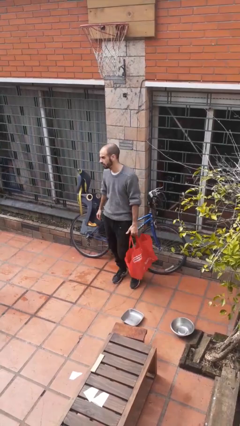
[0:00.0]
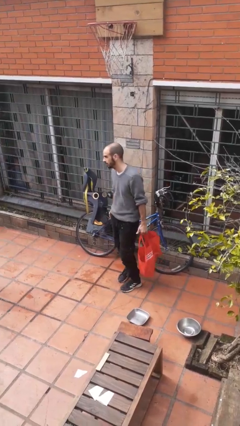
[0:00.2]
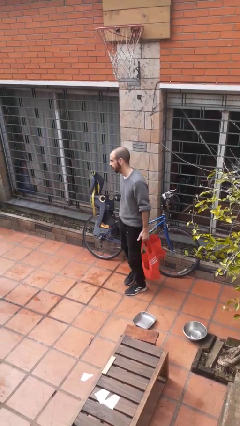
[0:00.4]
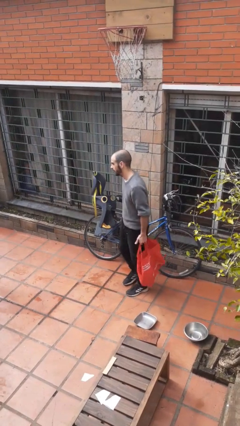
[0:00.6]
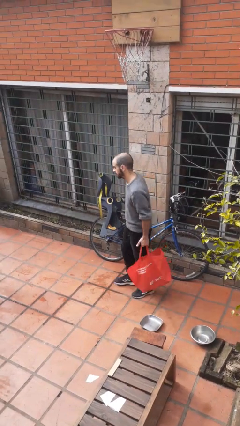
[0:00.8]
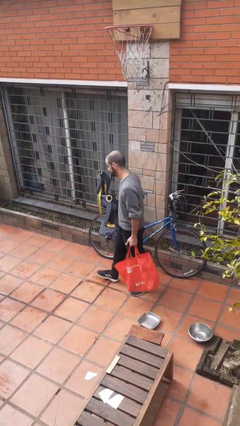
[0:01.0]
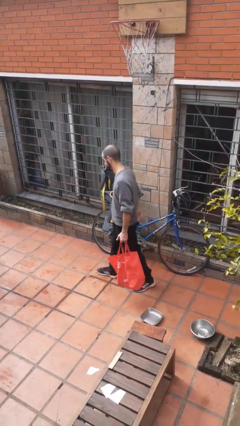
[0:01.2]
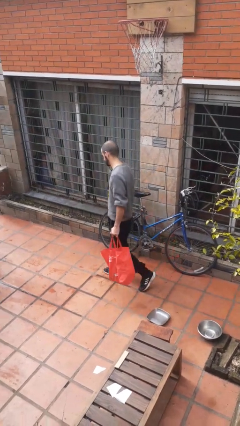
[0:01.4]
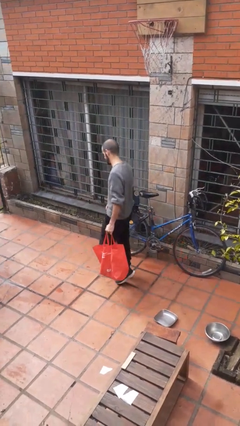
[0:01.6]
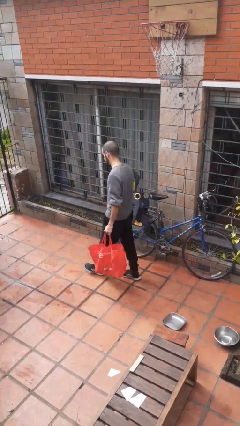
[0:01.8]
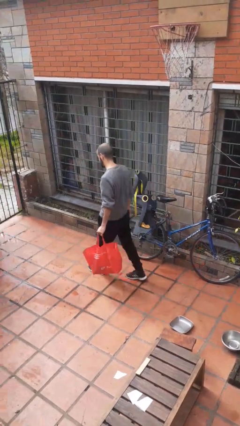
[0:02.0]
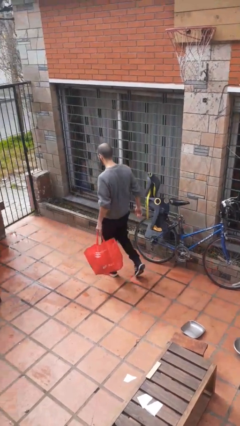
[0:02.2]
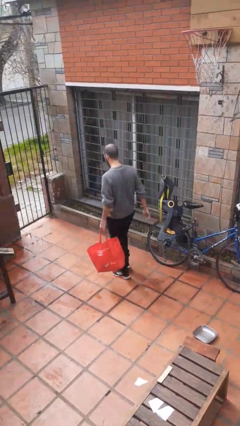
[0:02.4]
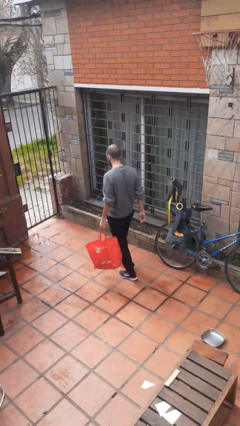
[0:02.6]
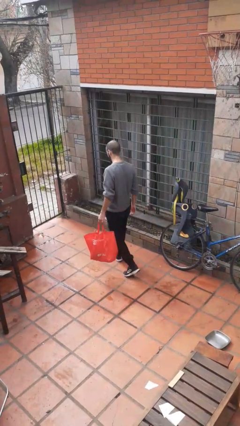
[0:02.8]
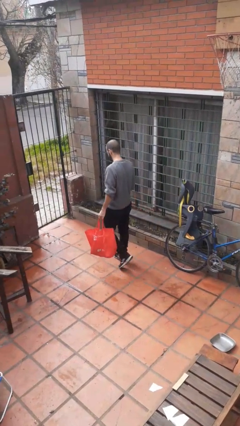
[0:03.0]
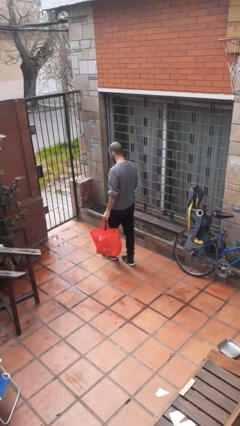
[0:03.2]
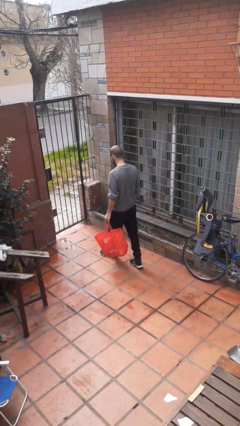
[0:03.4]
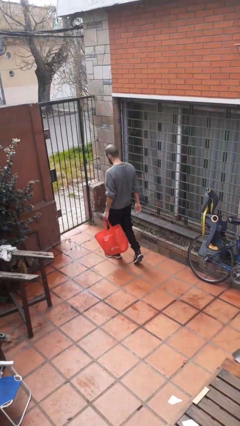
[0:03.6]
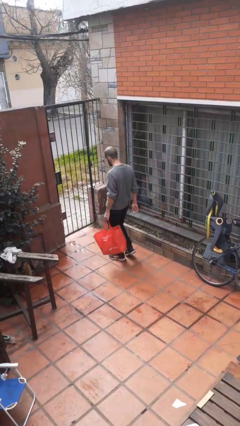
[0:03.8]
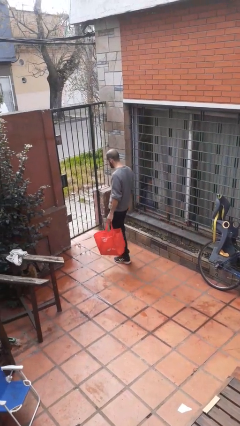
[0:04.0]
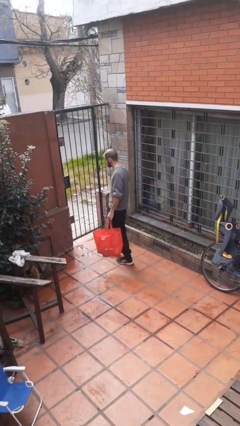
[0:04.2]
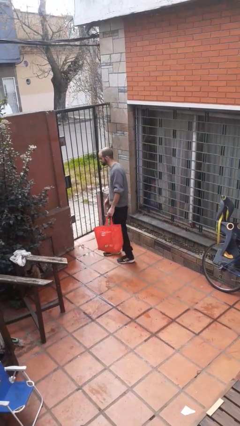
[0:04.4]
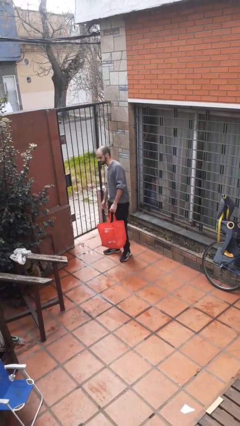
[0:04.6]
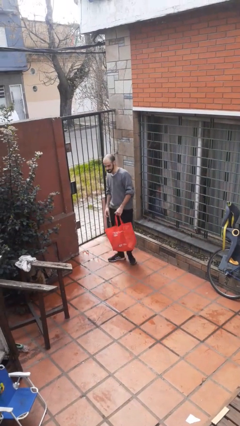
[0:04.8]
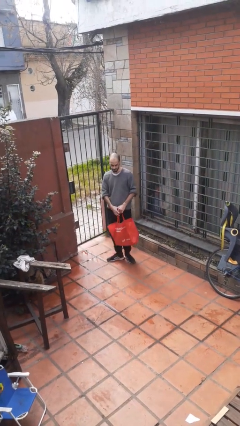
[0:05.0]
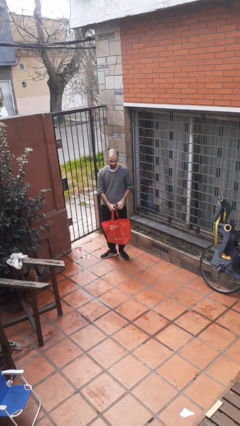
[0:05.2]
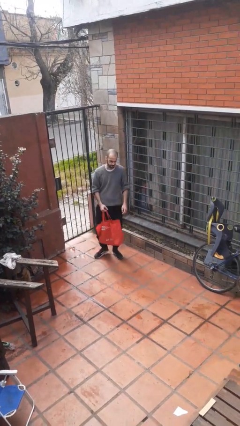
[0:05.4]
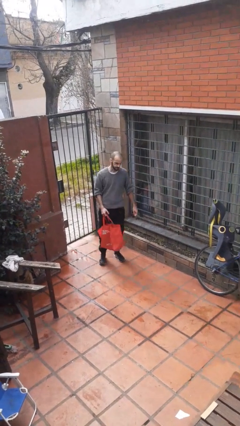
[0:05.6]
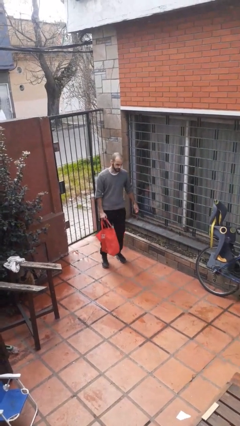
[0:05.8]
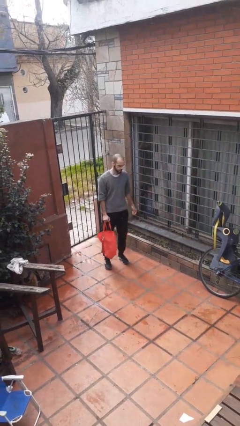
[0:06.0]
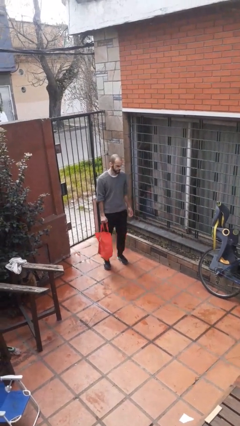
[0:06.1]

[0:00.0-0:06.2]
person carries groceries

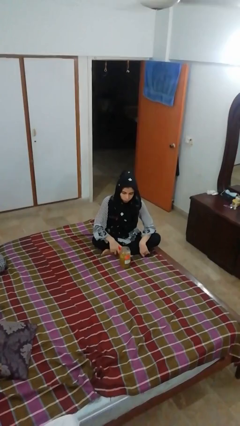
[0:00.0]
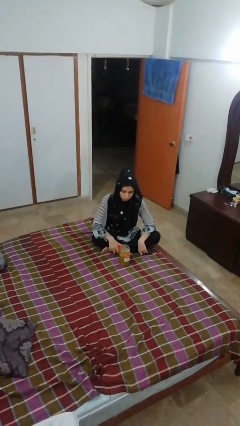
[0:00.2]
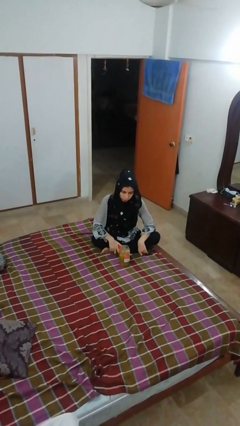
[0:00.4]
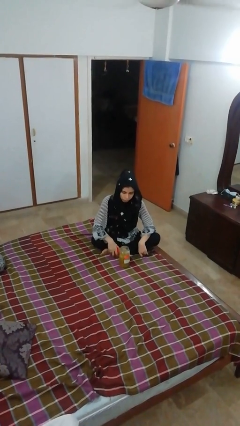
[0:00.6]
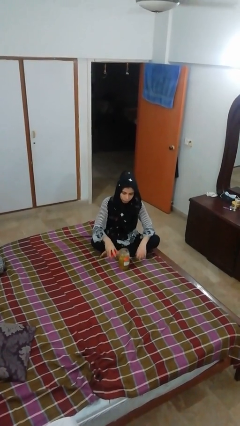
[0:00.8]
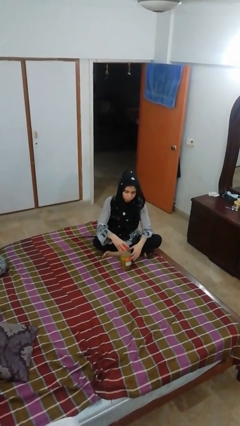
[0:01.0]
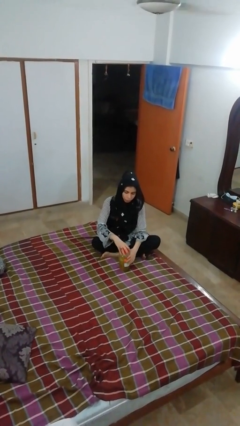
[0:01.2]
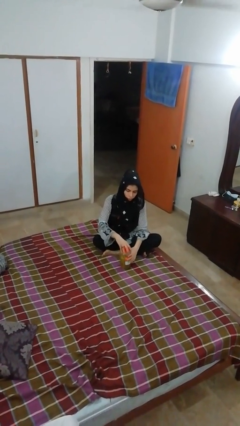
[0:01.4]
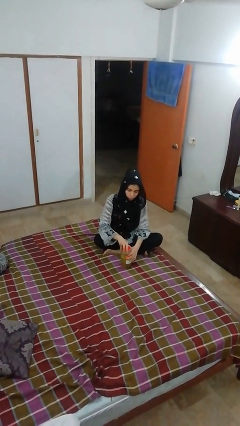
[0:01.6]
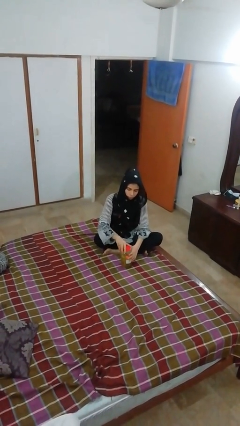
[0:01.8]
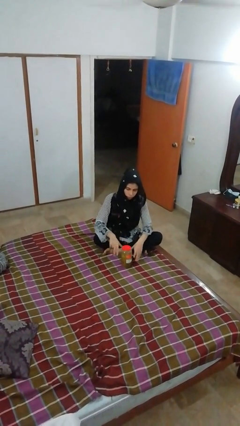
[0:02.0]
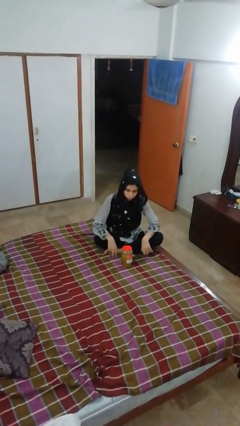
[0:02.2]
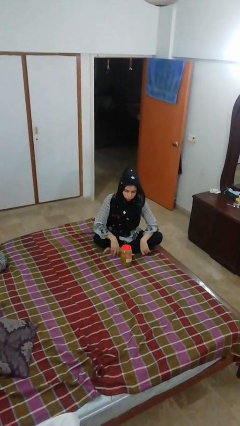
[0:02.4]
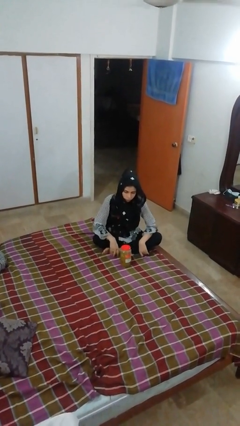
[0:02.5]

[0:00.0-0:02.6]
person closes jar

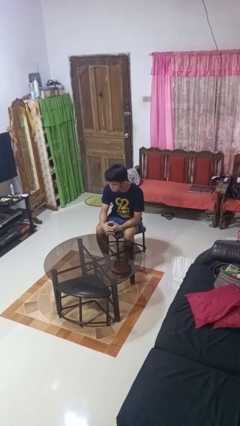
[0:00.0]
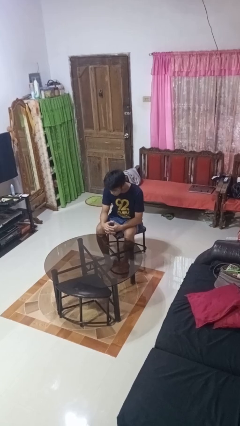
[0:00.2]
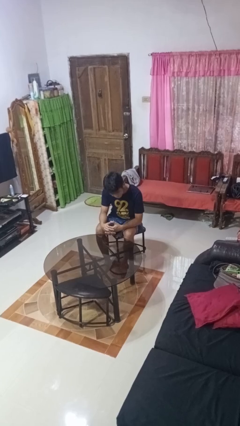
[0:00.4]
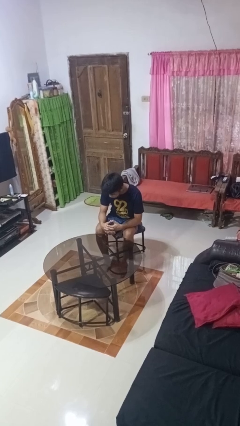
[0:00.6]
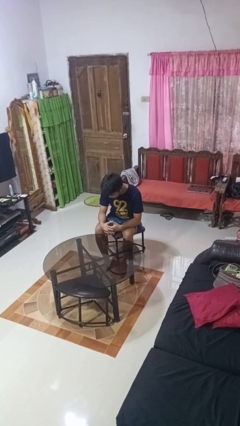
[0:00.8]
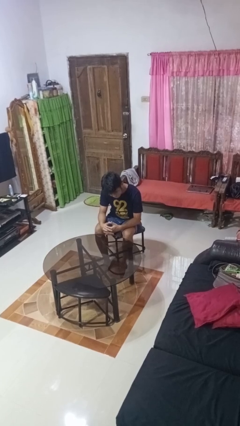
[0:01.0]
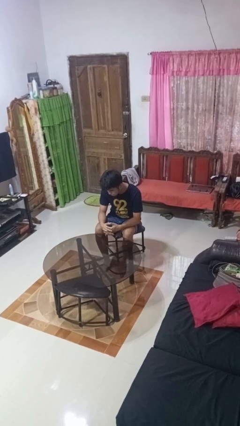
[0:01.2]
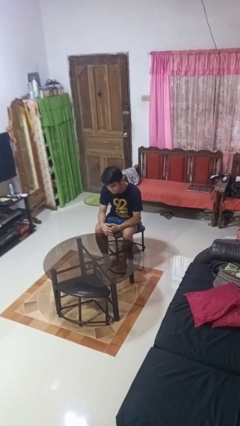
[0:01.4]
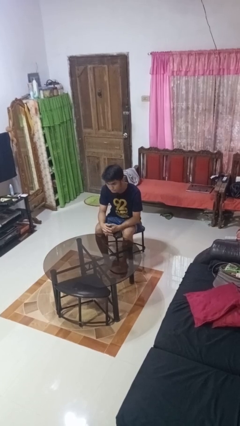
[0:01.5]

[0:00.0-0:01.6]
person shakes head

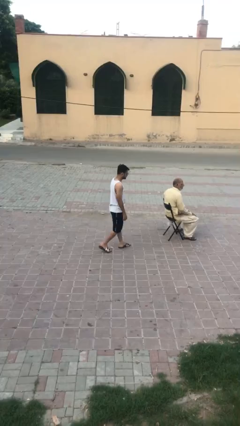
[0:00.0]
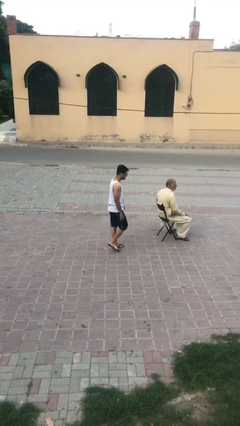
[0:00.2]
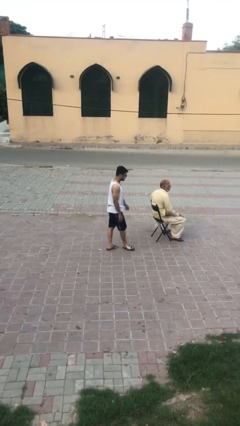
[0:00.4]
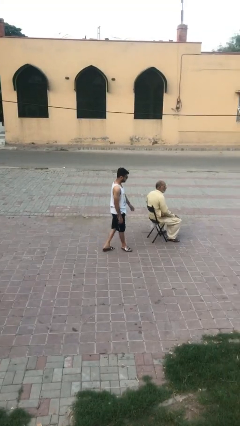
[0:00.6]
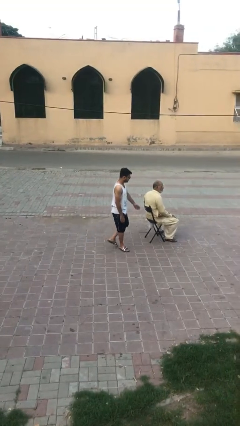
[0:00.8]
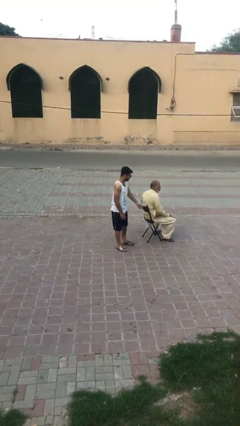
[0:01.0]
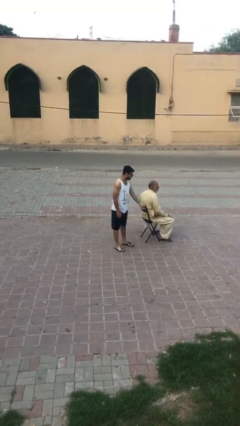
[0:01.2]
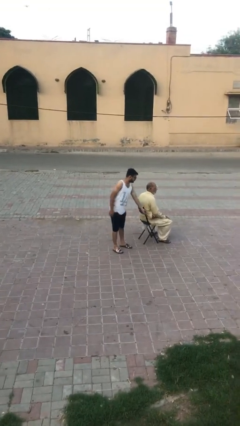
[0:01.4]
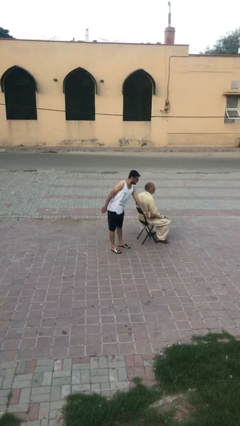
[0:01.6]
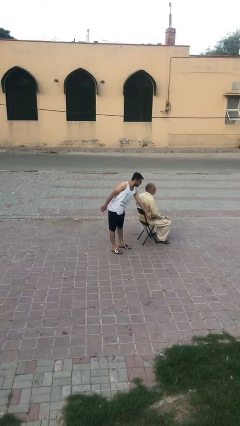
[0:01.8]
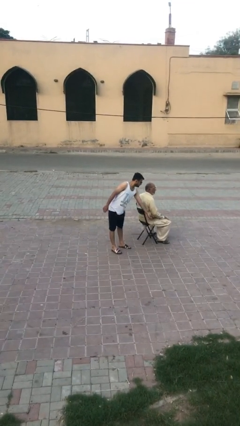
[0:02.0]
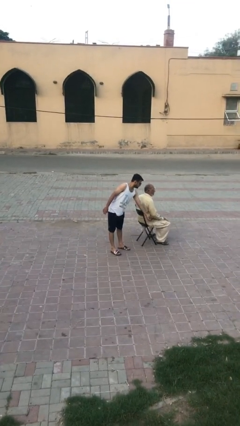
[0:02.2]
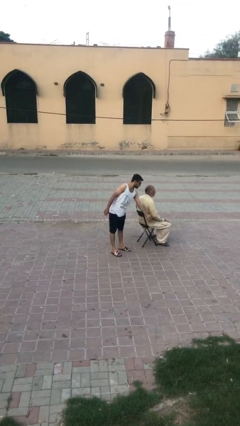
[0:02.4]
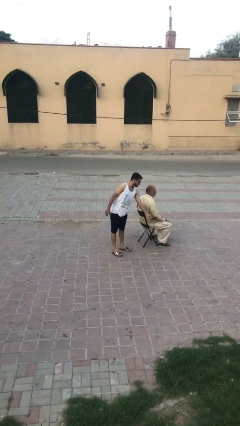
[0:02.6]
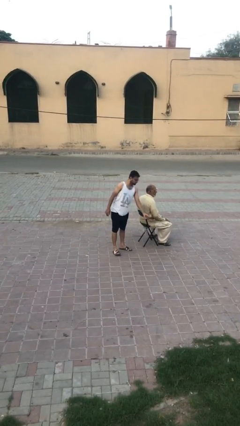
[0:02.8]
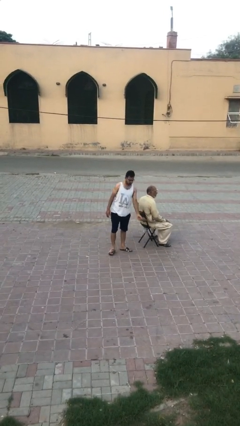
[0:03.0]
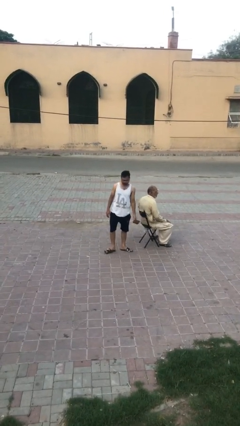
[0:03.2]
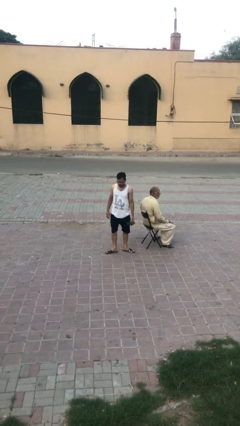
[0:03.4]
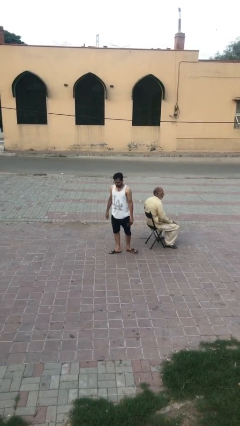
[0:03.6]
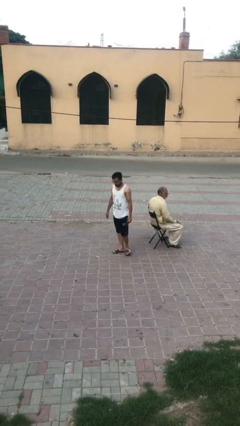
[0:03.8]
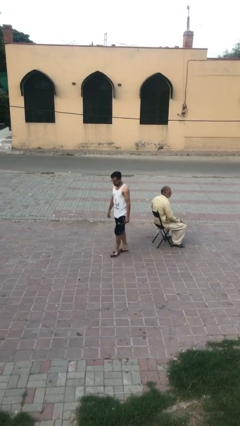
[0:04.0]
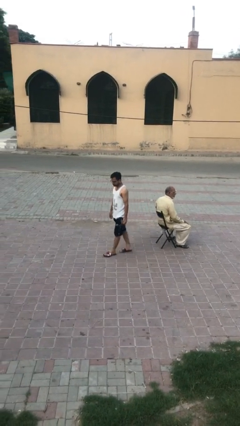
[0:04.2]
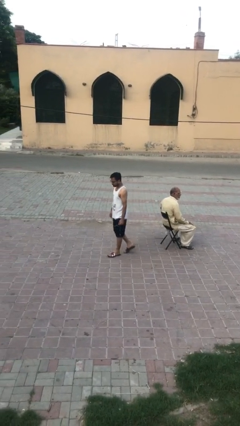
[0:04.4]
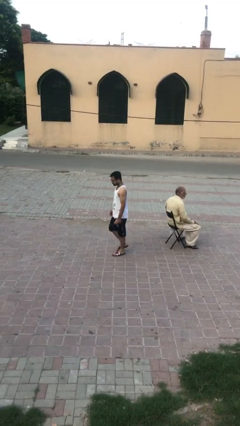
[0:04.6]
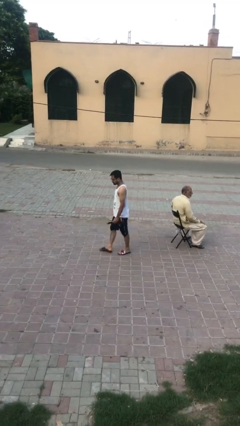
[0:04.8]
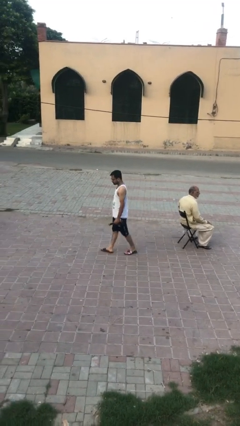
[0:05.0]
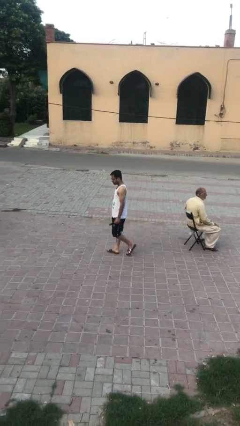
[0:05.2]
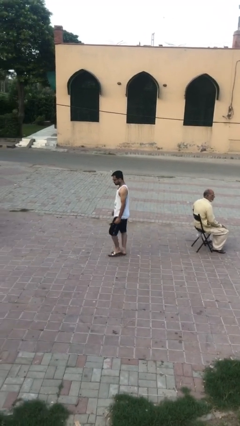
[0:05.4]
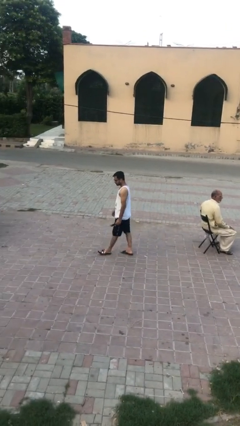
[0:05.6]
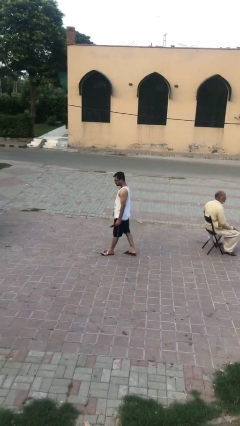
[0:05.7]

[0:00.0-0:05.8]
person steals object from person

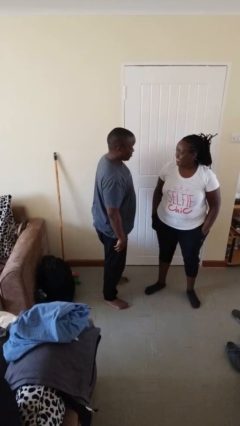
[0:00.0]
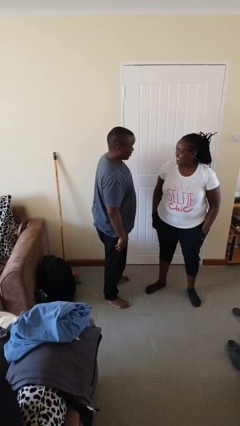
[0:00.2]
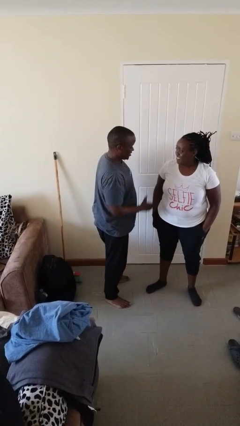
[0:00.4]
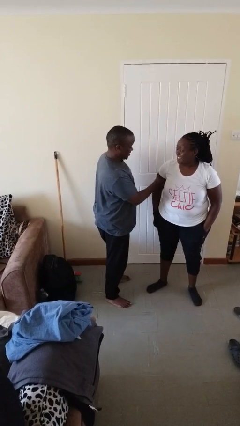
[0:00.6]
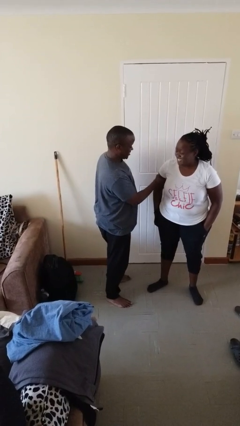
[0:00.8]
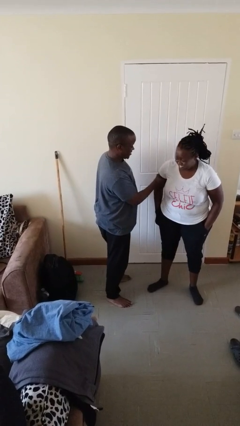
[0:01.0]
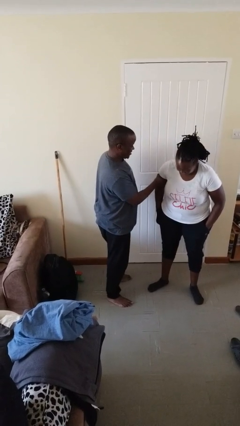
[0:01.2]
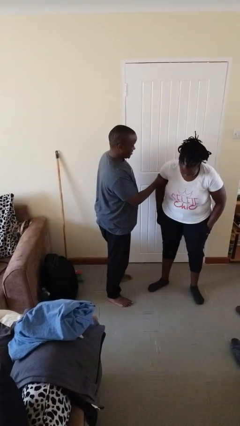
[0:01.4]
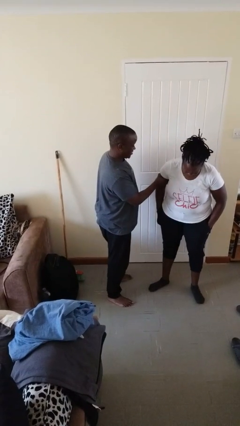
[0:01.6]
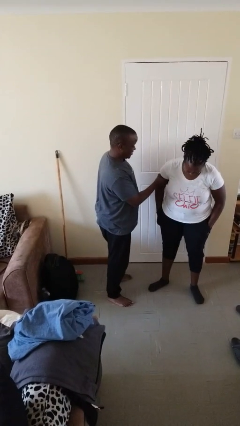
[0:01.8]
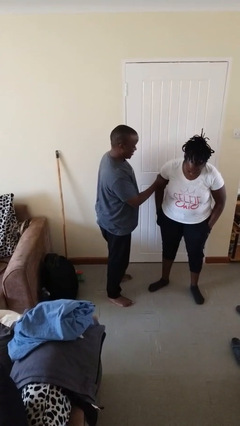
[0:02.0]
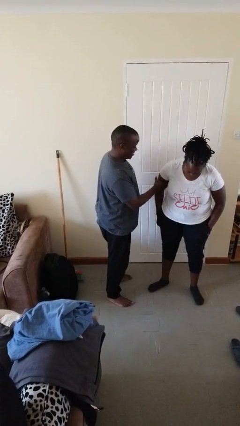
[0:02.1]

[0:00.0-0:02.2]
person grabs person by bicep
